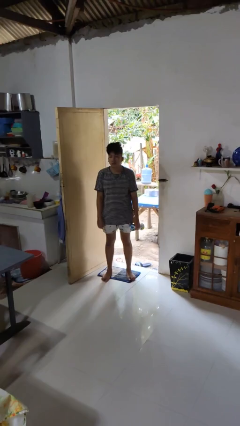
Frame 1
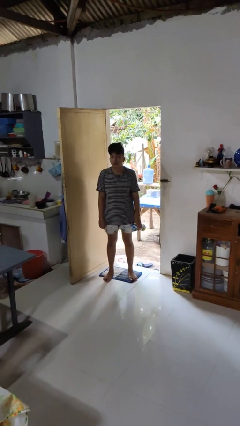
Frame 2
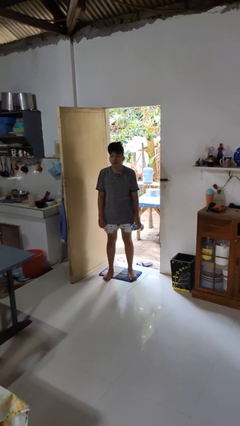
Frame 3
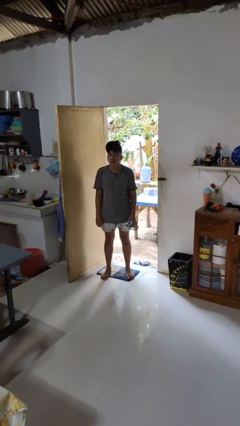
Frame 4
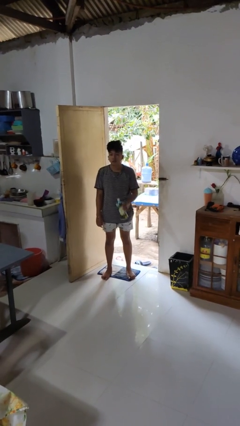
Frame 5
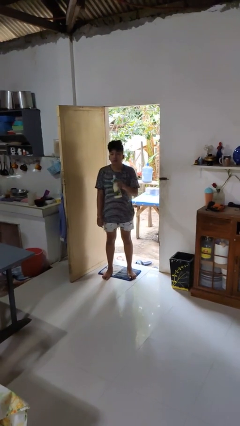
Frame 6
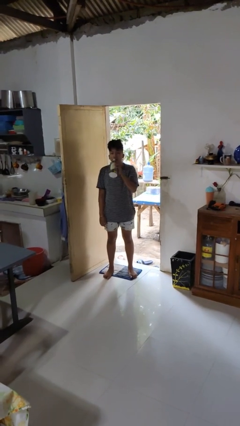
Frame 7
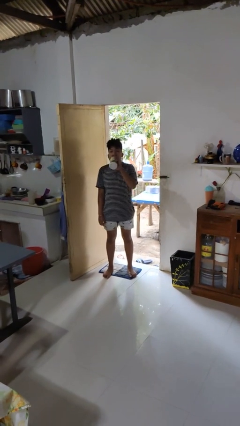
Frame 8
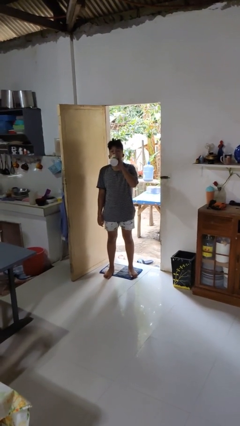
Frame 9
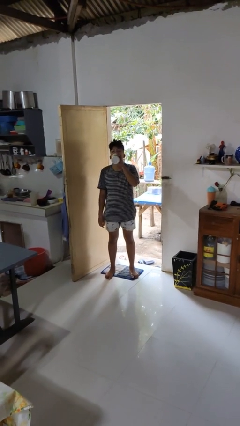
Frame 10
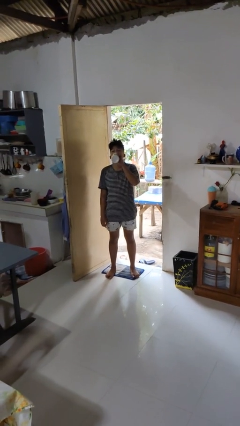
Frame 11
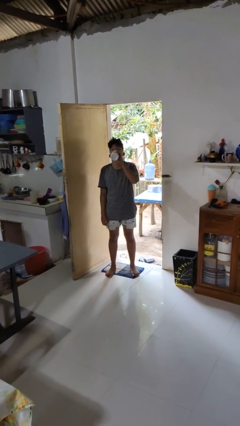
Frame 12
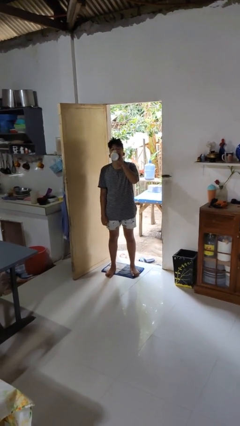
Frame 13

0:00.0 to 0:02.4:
person drinks from bottle

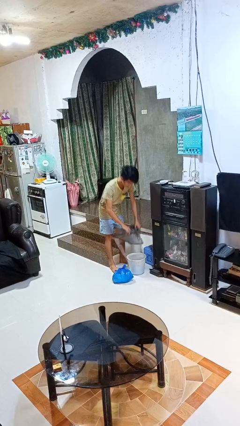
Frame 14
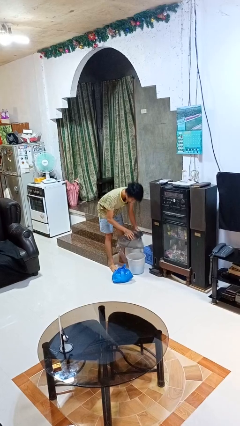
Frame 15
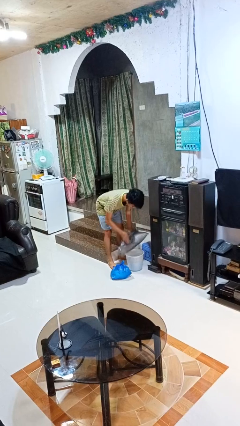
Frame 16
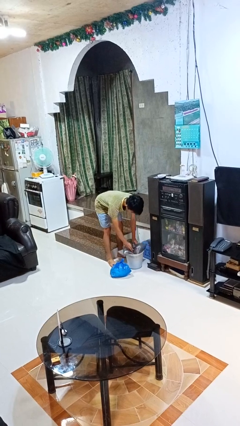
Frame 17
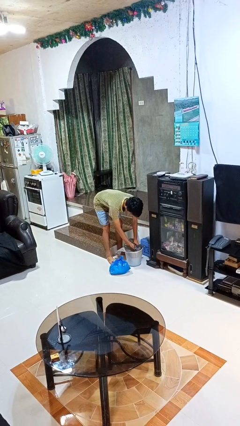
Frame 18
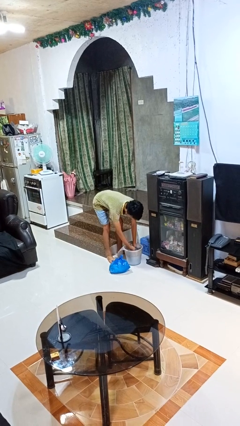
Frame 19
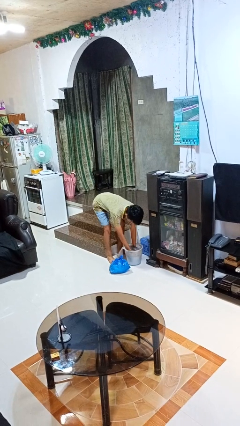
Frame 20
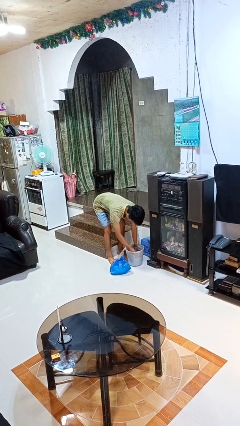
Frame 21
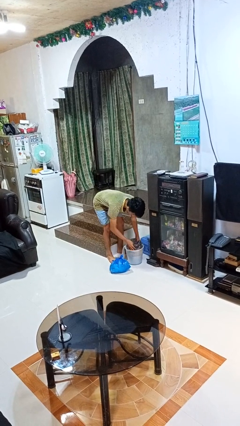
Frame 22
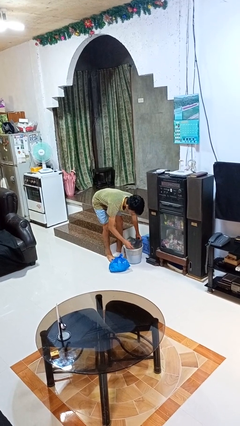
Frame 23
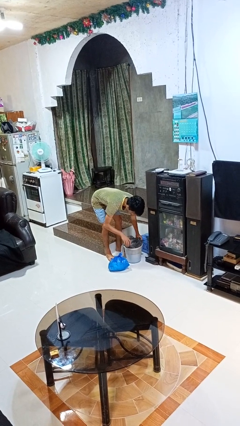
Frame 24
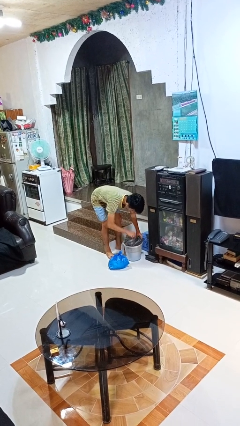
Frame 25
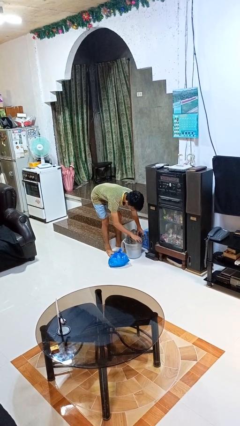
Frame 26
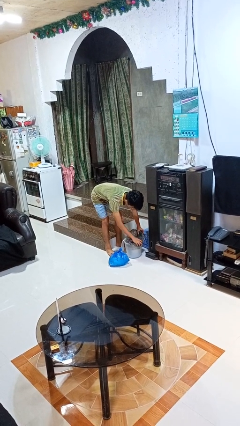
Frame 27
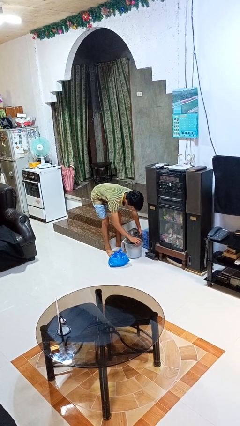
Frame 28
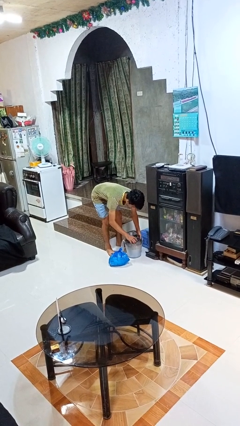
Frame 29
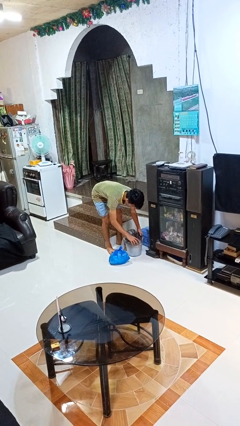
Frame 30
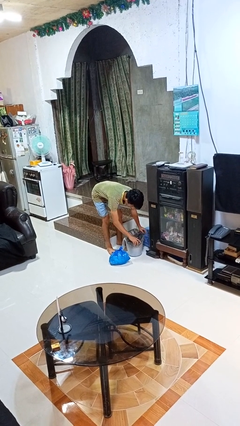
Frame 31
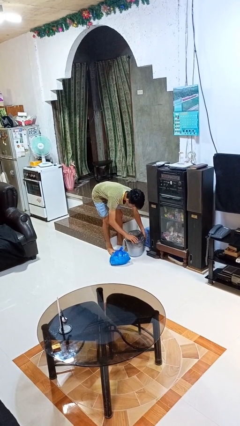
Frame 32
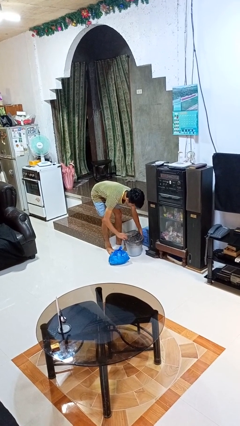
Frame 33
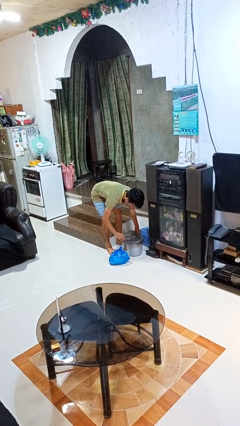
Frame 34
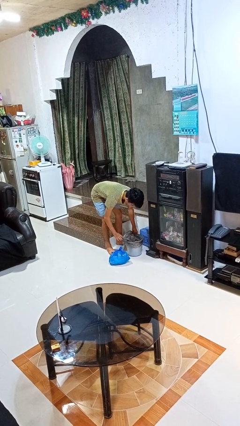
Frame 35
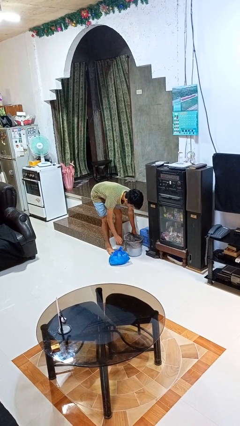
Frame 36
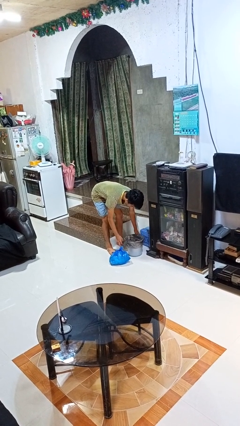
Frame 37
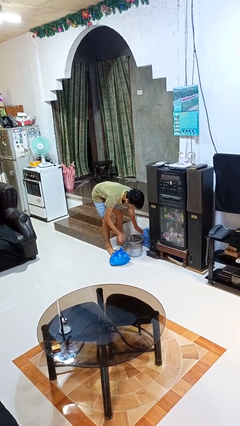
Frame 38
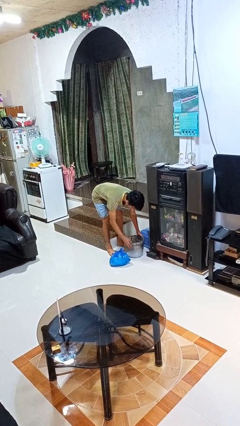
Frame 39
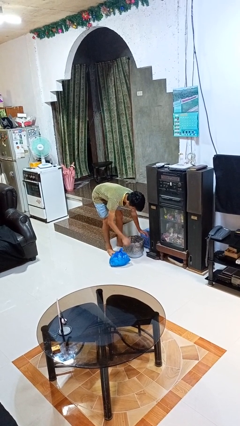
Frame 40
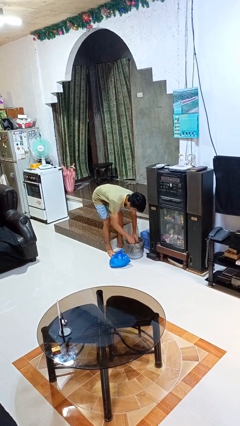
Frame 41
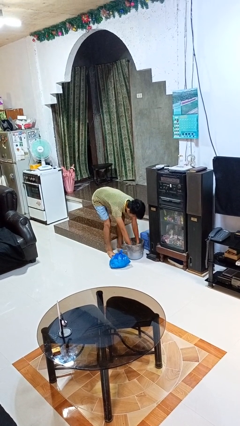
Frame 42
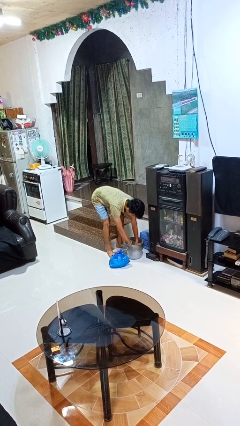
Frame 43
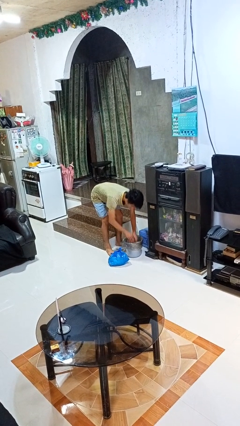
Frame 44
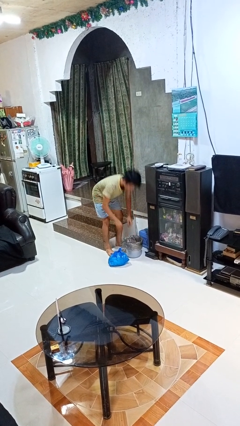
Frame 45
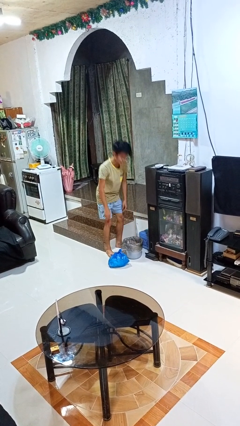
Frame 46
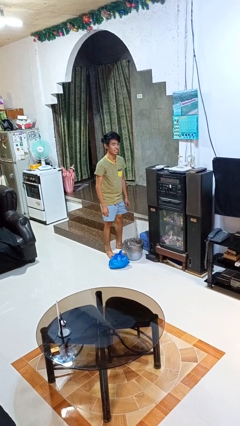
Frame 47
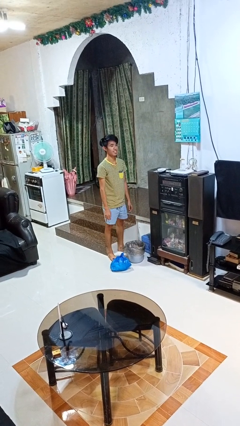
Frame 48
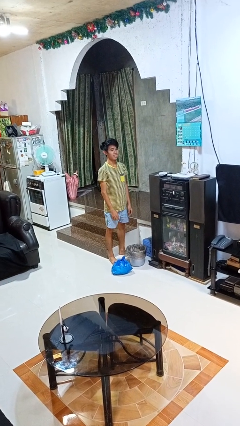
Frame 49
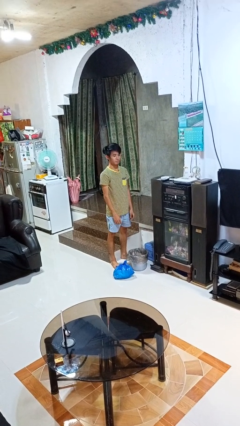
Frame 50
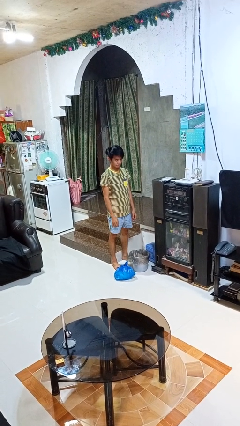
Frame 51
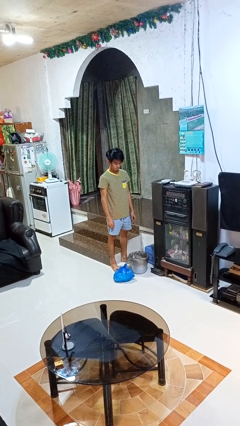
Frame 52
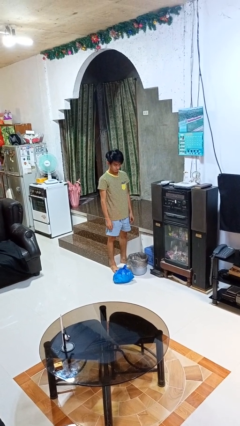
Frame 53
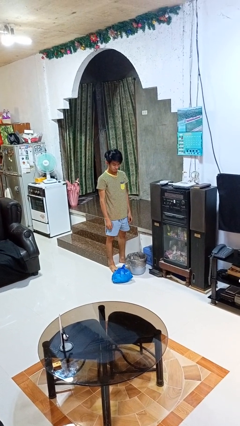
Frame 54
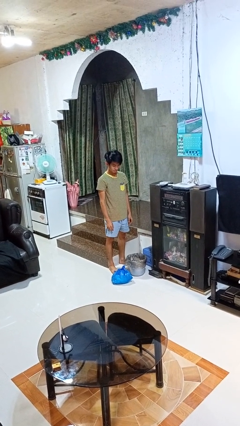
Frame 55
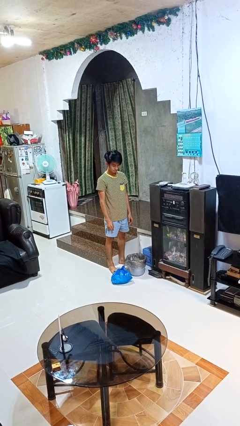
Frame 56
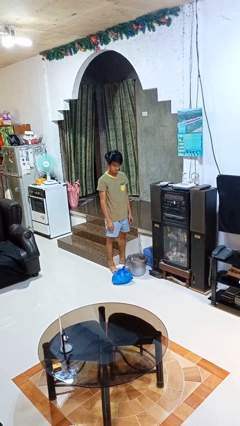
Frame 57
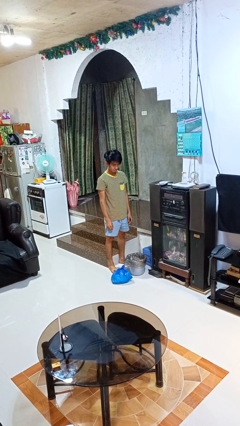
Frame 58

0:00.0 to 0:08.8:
person inserts trashbag into trashcan

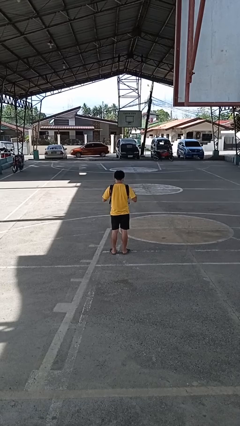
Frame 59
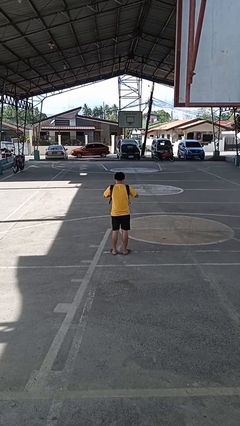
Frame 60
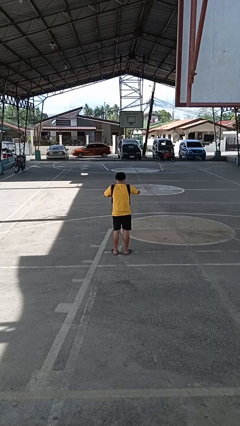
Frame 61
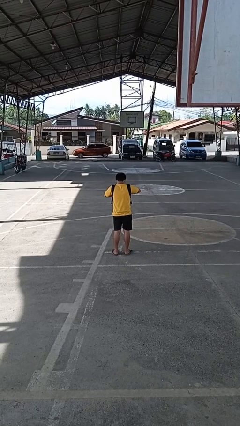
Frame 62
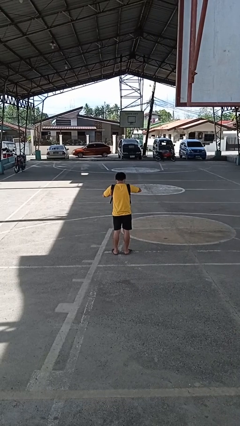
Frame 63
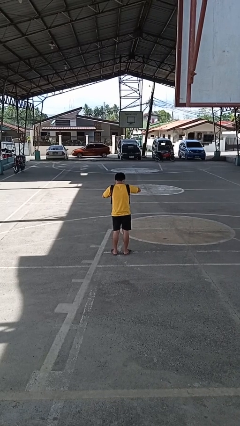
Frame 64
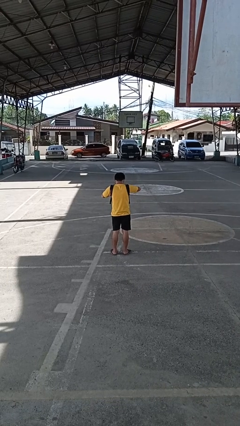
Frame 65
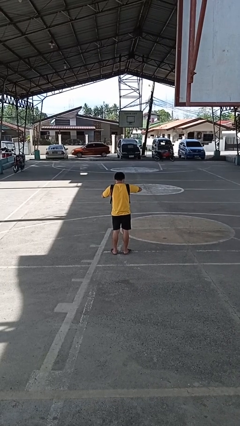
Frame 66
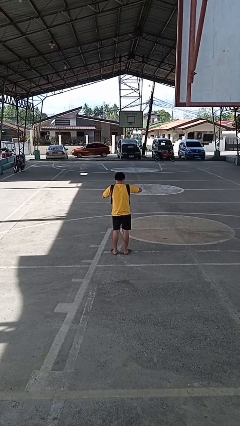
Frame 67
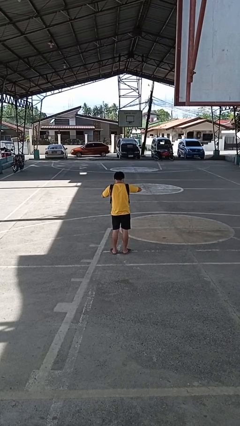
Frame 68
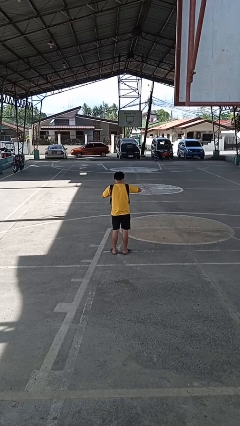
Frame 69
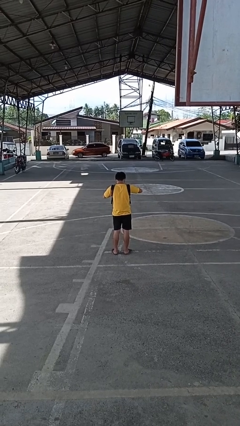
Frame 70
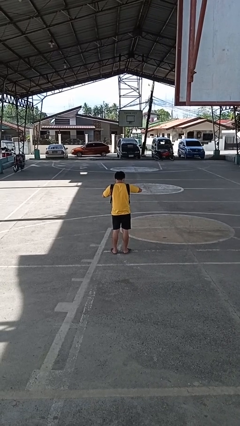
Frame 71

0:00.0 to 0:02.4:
person searches in backpack

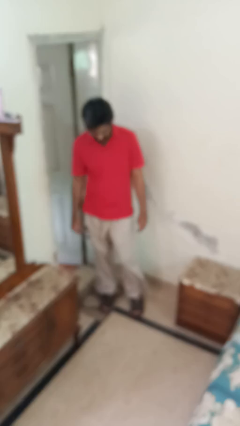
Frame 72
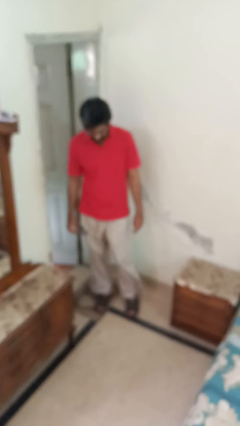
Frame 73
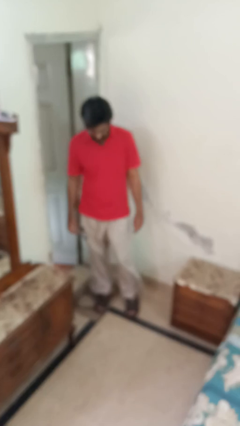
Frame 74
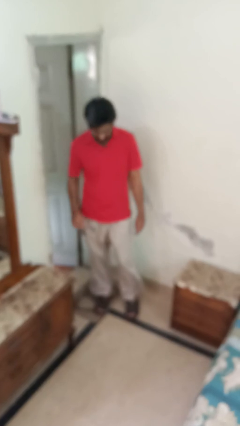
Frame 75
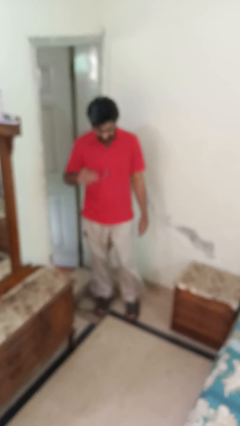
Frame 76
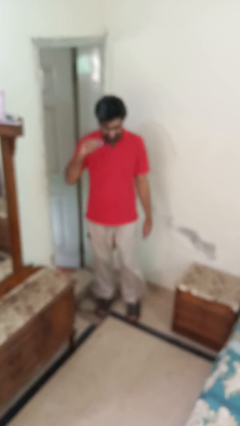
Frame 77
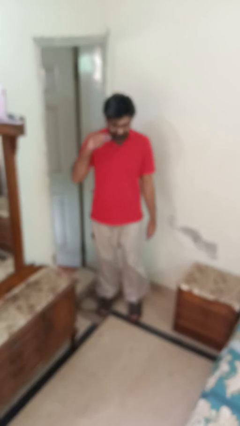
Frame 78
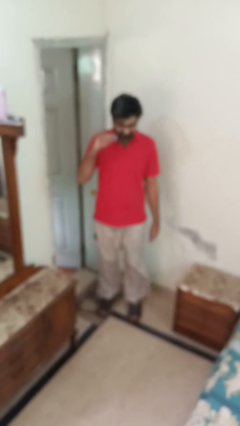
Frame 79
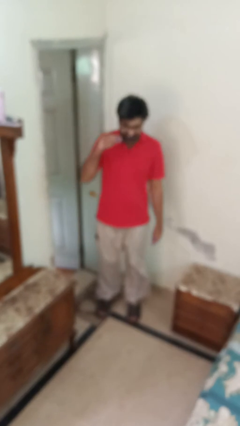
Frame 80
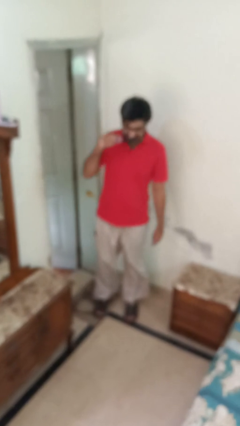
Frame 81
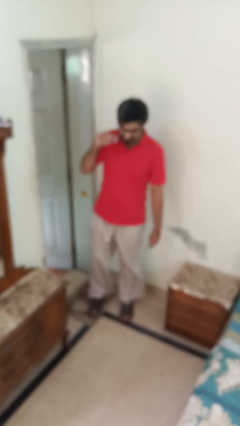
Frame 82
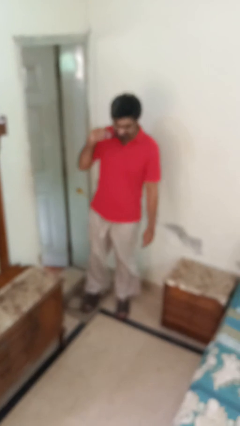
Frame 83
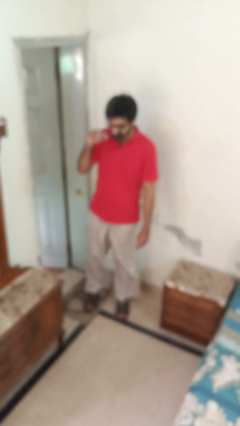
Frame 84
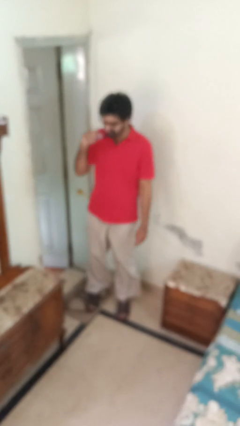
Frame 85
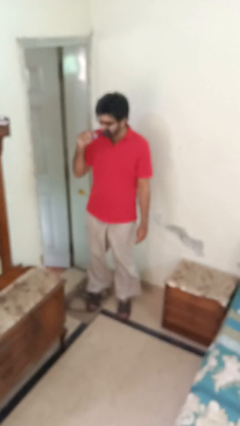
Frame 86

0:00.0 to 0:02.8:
person brushes teeth

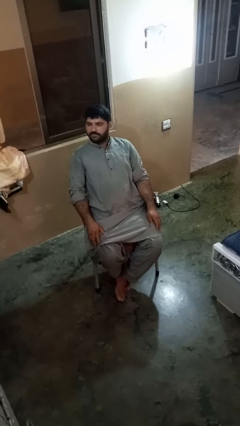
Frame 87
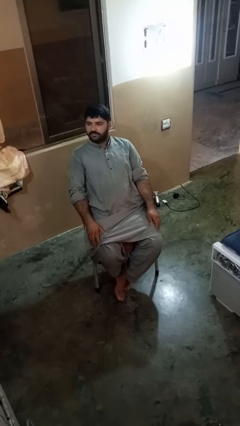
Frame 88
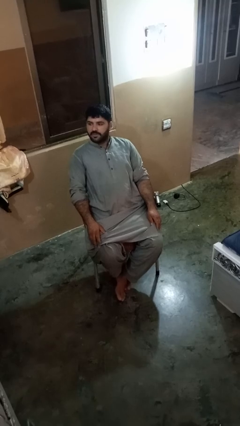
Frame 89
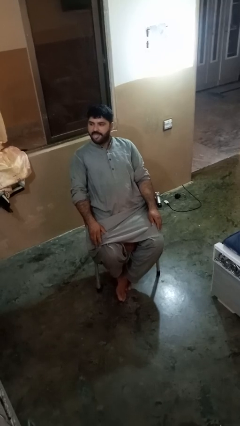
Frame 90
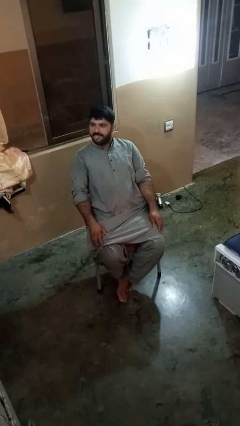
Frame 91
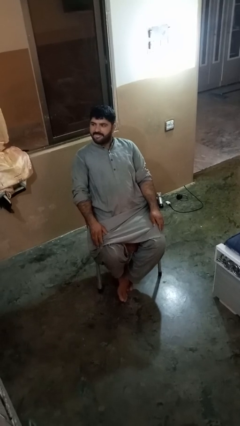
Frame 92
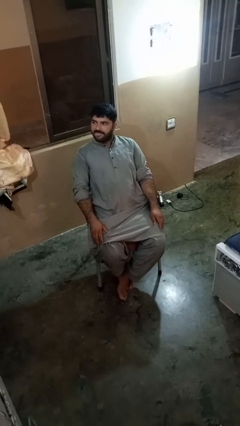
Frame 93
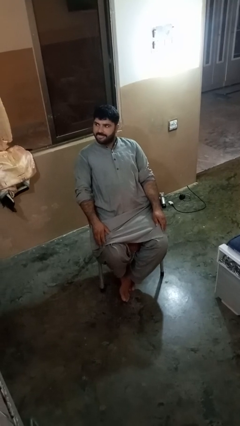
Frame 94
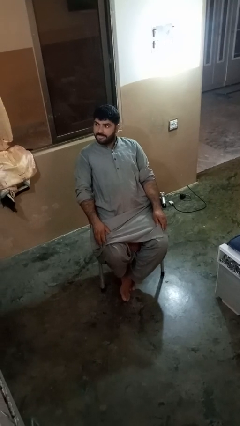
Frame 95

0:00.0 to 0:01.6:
person sticks out tongue
